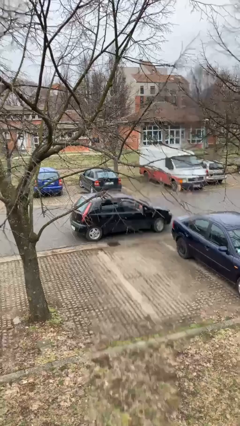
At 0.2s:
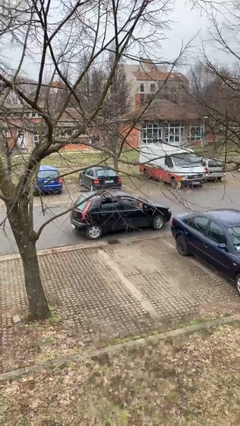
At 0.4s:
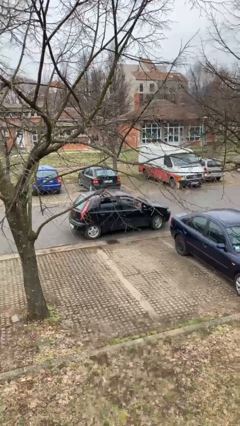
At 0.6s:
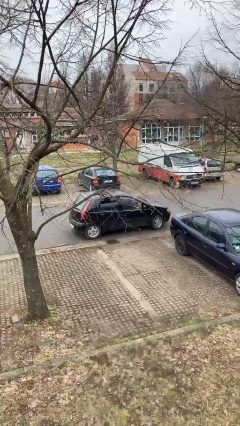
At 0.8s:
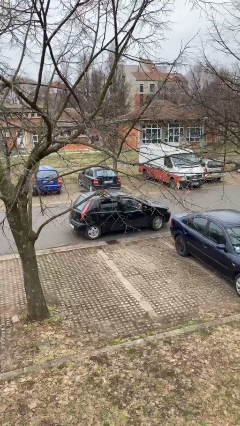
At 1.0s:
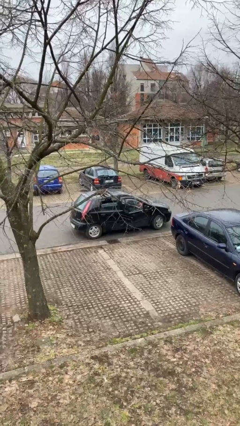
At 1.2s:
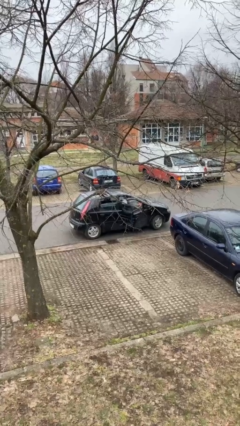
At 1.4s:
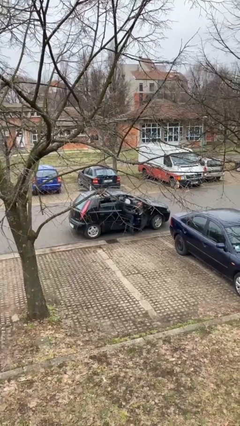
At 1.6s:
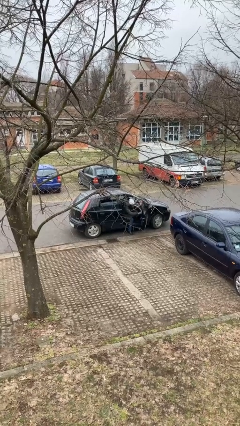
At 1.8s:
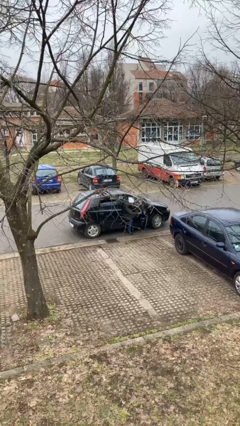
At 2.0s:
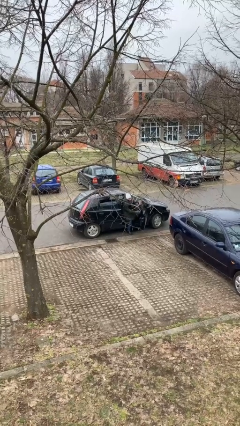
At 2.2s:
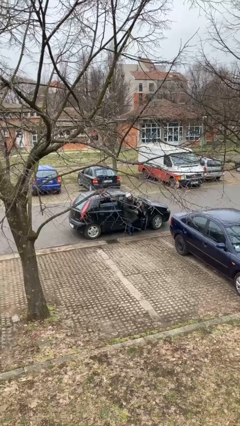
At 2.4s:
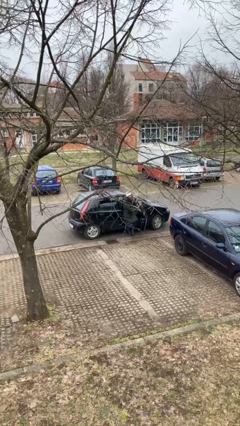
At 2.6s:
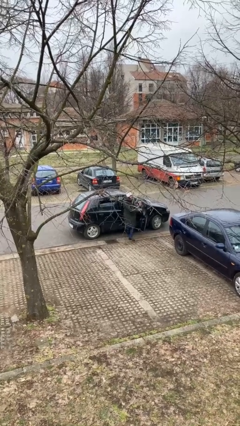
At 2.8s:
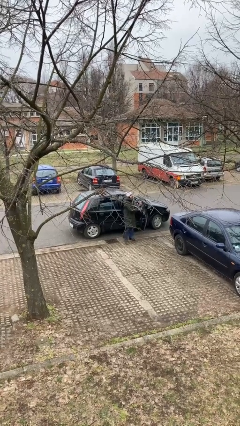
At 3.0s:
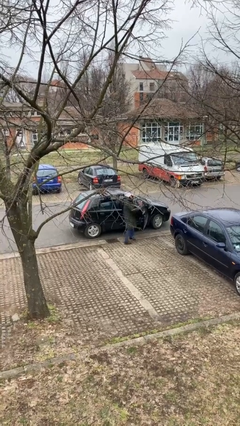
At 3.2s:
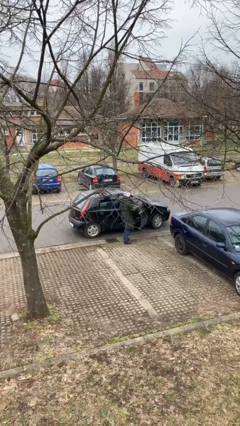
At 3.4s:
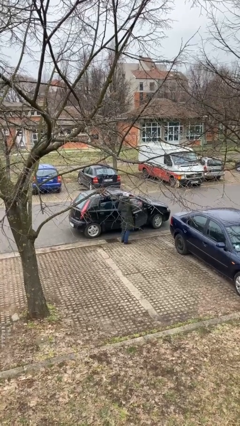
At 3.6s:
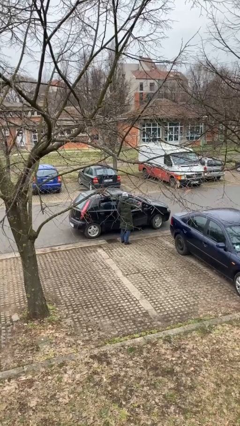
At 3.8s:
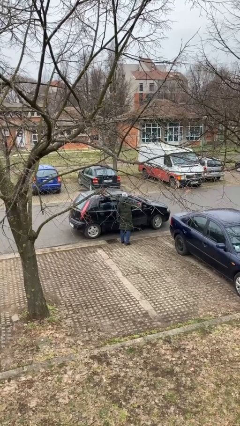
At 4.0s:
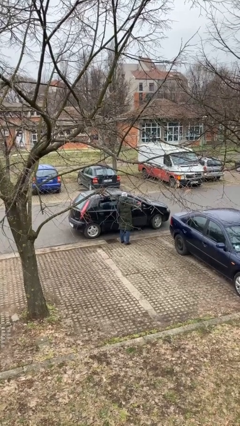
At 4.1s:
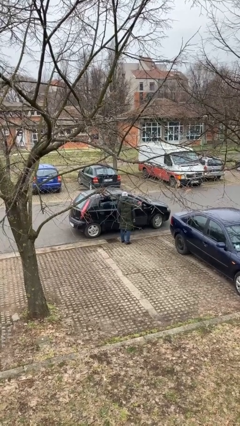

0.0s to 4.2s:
car drops off person

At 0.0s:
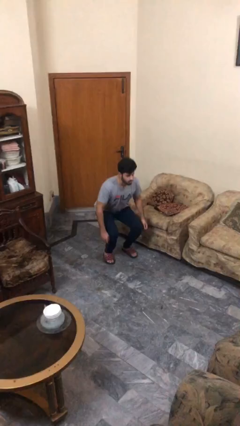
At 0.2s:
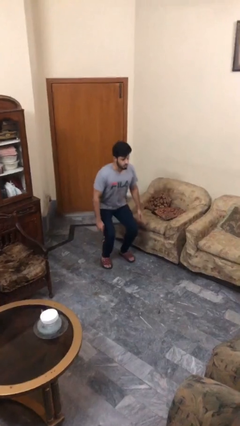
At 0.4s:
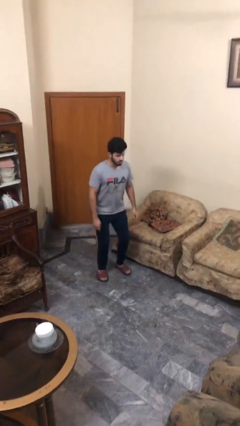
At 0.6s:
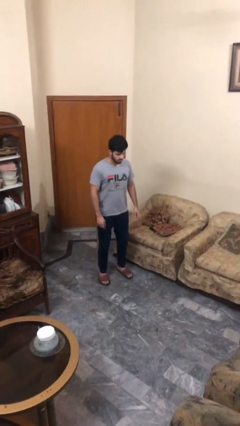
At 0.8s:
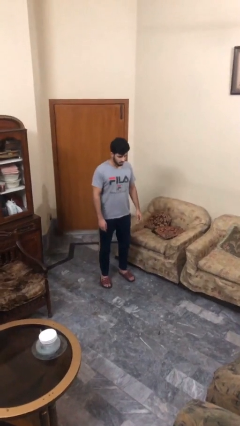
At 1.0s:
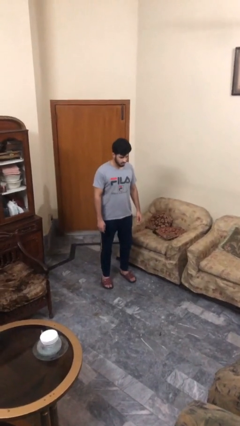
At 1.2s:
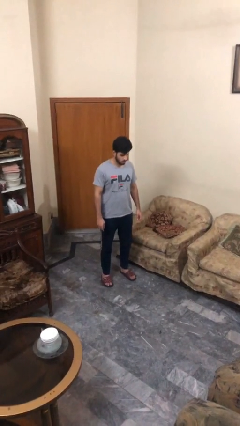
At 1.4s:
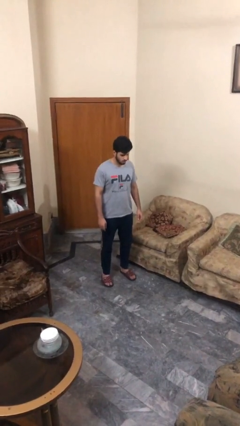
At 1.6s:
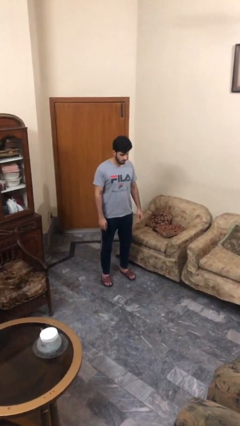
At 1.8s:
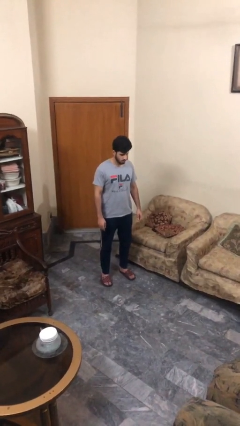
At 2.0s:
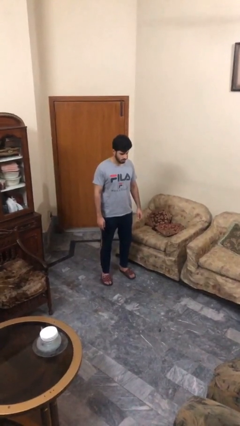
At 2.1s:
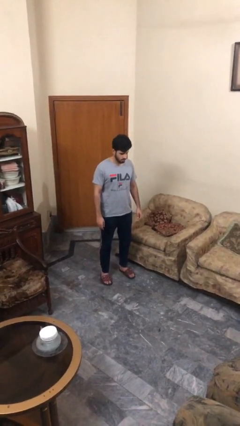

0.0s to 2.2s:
person stands up

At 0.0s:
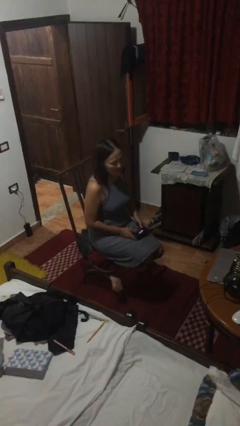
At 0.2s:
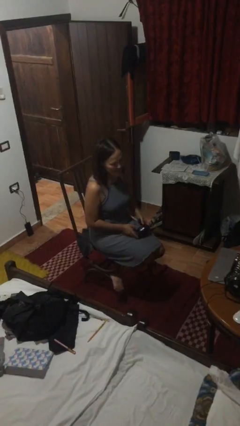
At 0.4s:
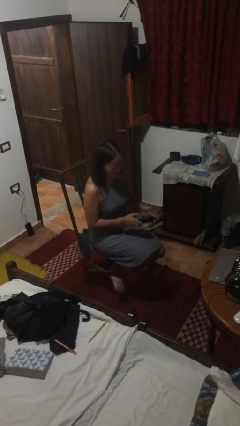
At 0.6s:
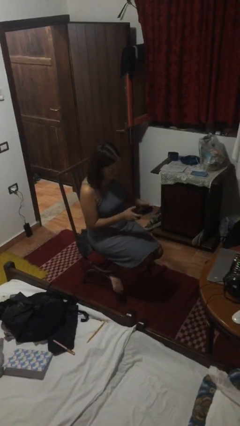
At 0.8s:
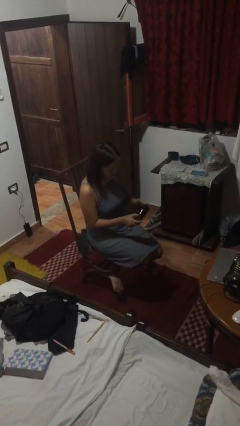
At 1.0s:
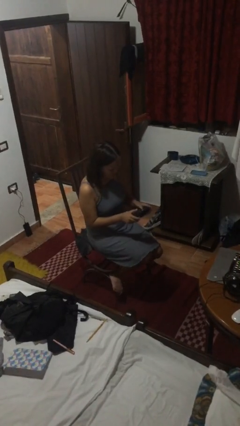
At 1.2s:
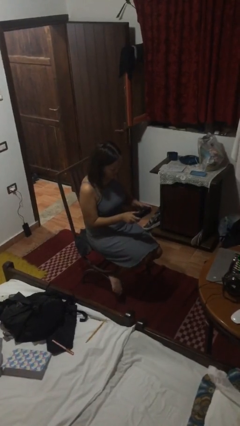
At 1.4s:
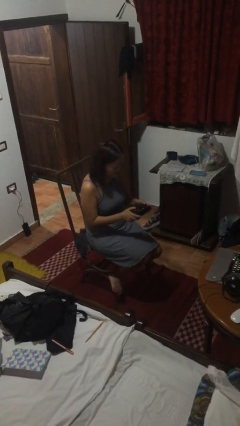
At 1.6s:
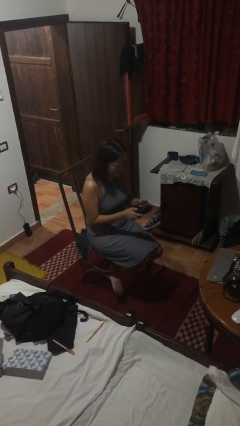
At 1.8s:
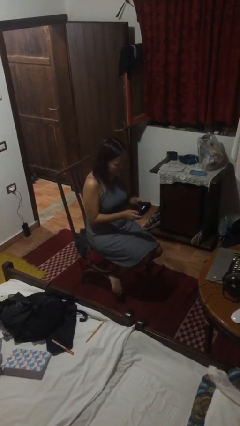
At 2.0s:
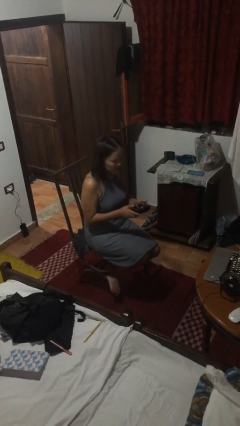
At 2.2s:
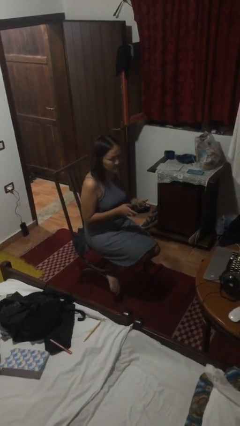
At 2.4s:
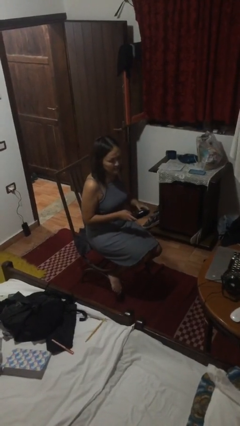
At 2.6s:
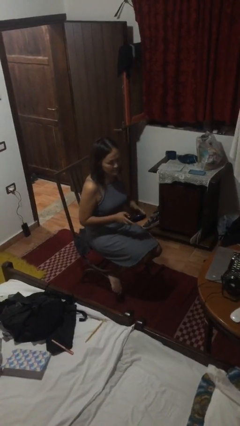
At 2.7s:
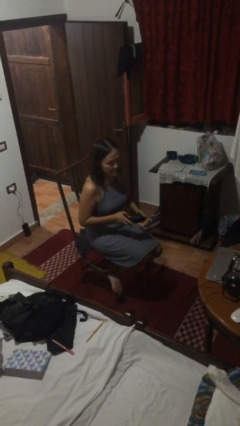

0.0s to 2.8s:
person interacts with handheld game

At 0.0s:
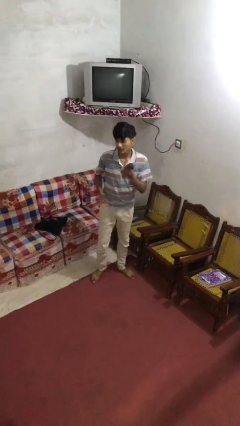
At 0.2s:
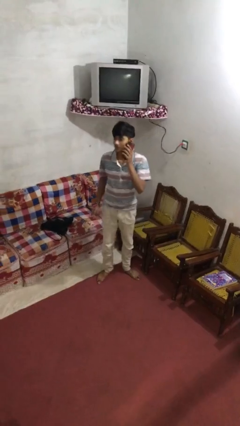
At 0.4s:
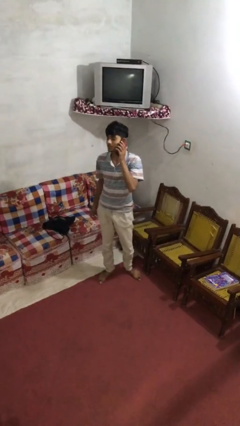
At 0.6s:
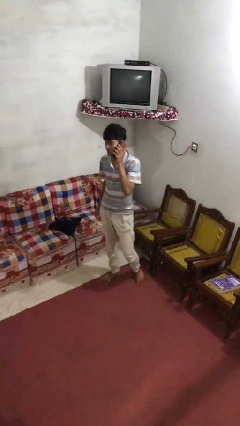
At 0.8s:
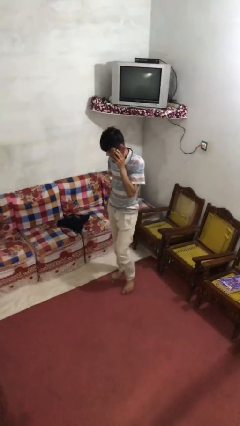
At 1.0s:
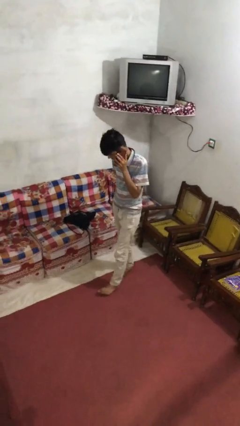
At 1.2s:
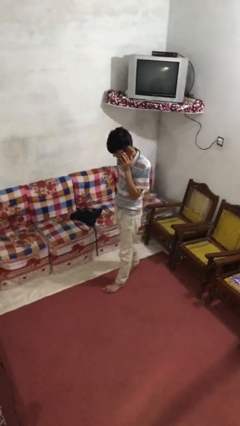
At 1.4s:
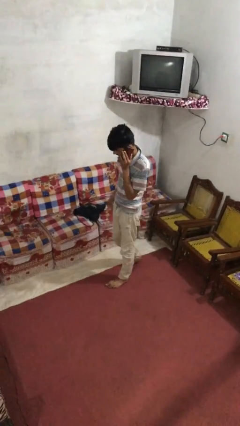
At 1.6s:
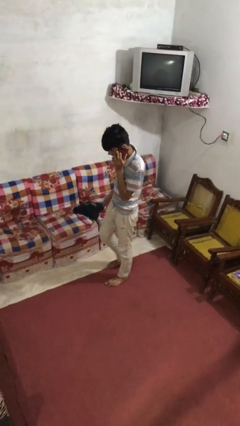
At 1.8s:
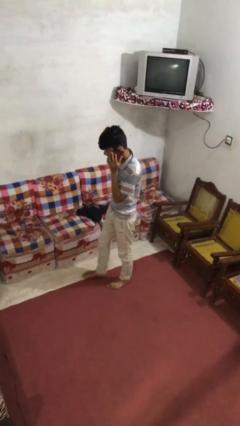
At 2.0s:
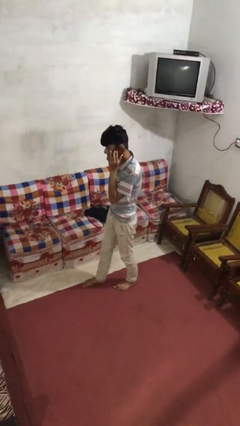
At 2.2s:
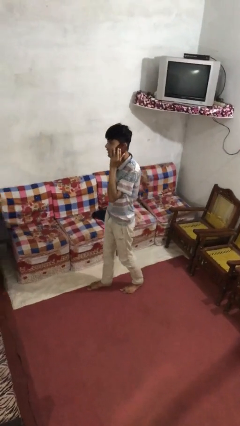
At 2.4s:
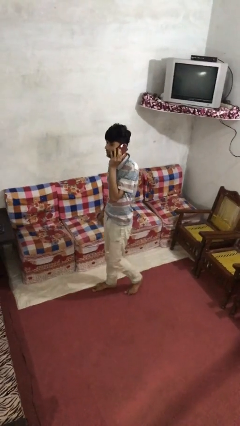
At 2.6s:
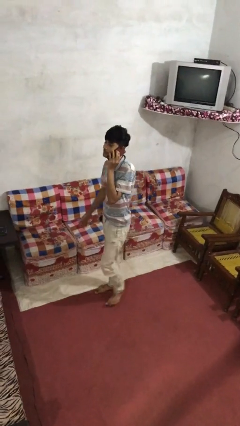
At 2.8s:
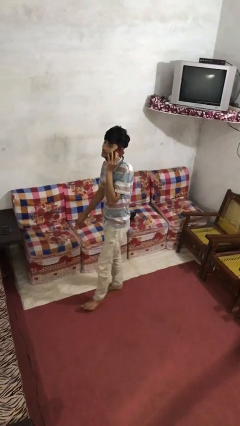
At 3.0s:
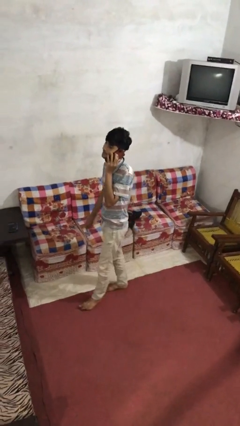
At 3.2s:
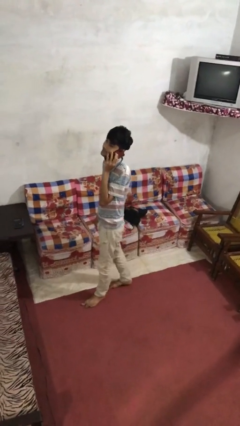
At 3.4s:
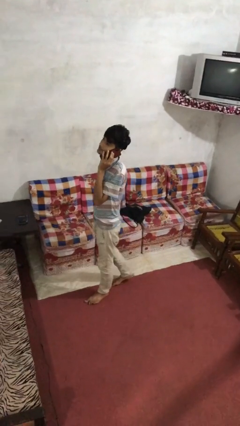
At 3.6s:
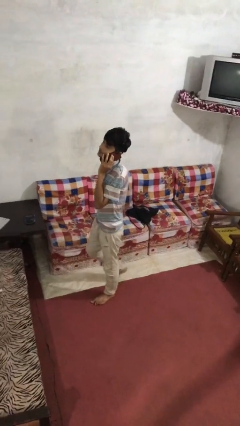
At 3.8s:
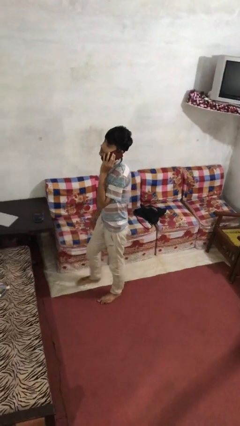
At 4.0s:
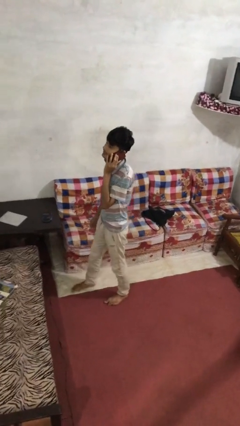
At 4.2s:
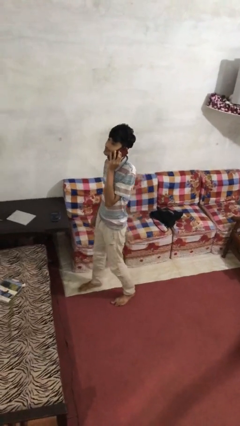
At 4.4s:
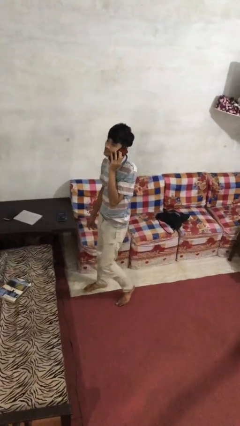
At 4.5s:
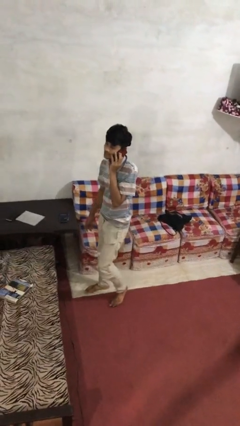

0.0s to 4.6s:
person talks on phone

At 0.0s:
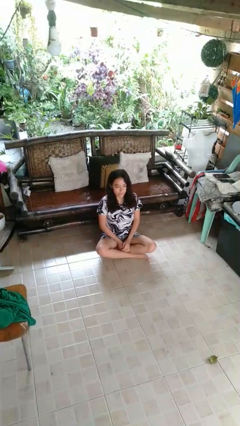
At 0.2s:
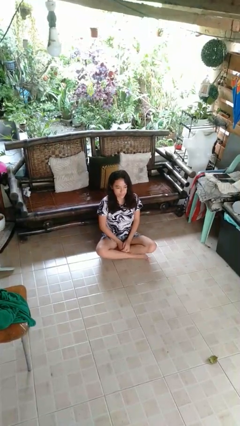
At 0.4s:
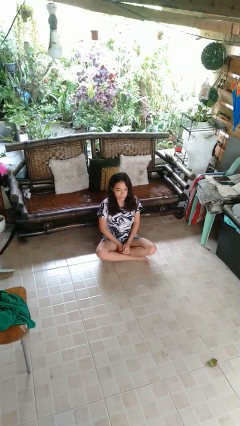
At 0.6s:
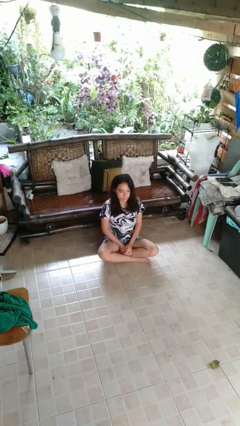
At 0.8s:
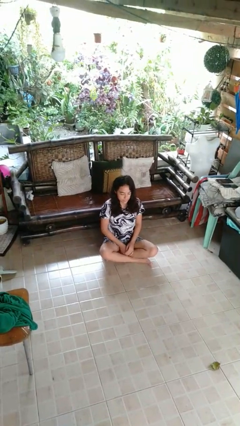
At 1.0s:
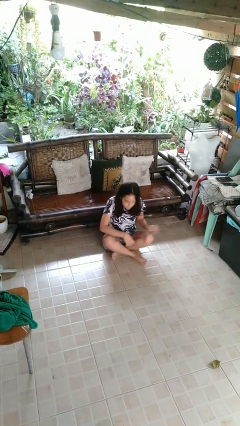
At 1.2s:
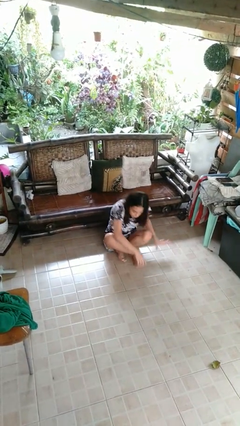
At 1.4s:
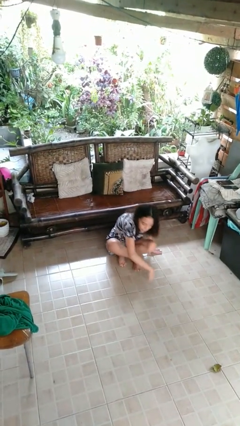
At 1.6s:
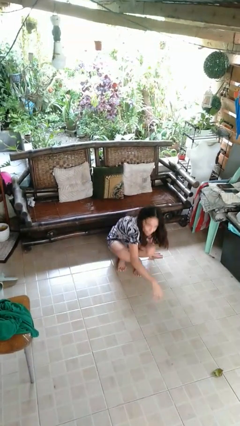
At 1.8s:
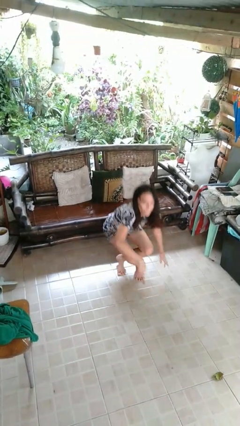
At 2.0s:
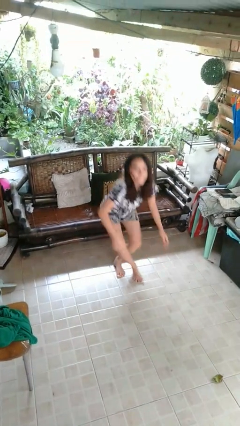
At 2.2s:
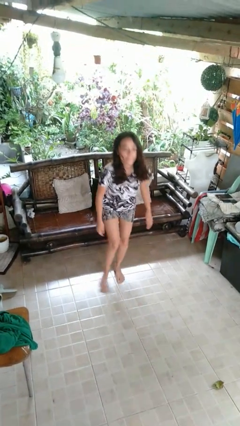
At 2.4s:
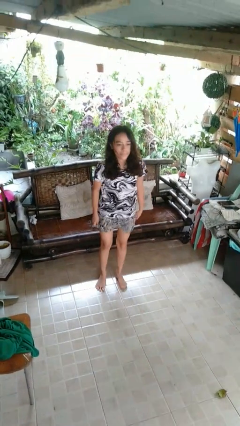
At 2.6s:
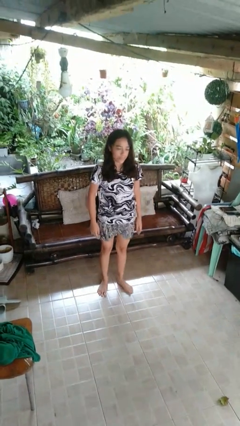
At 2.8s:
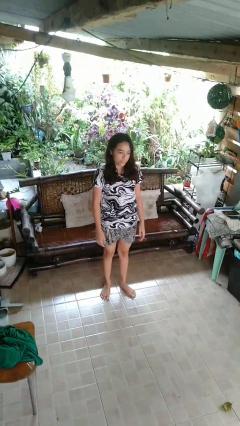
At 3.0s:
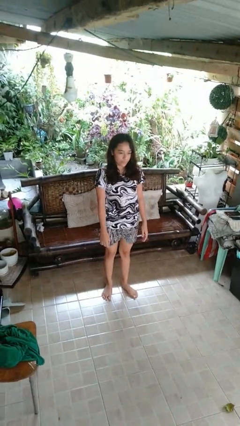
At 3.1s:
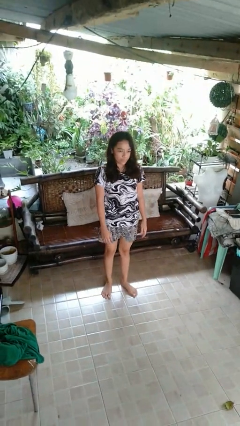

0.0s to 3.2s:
person stands up from floor
